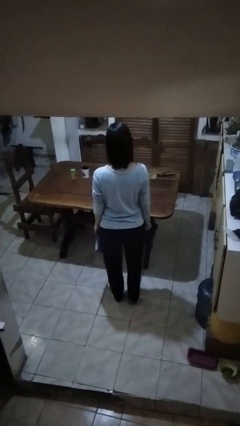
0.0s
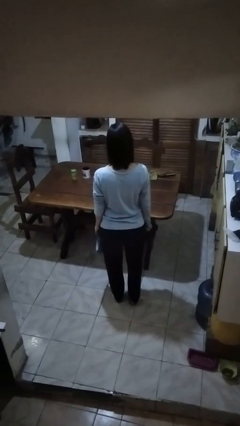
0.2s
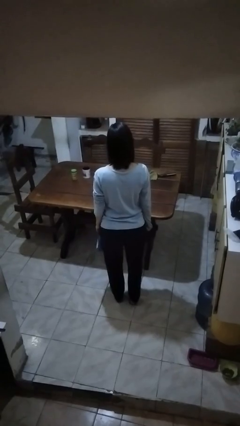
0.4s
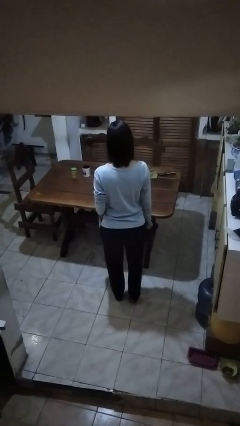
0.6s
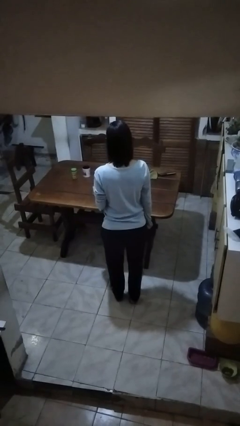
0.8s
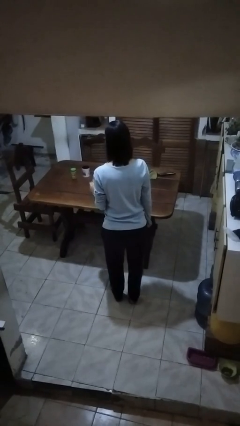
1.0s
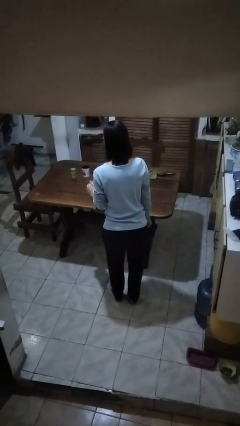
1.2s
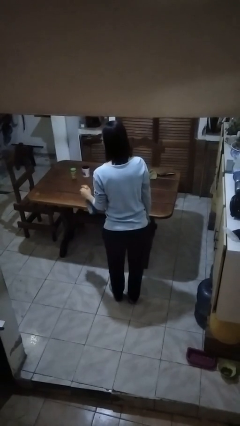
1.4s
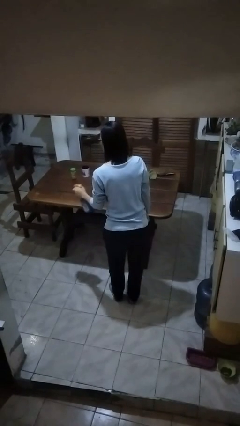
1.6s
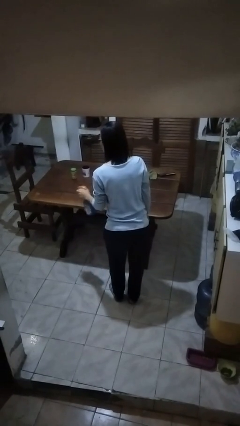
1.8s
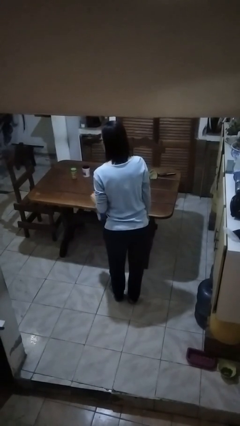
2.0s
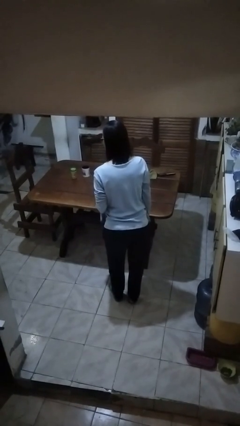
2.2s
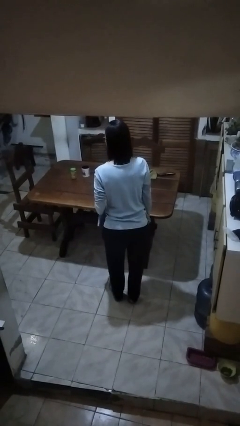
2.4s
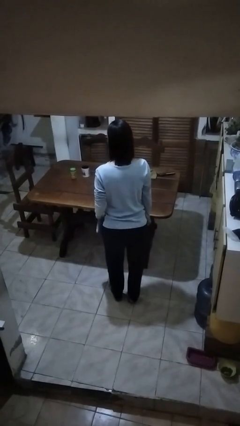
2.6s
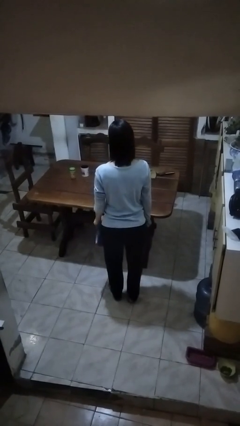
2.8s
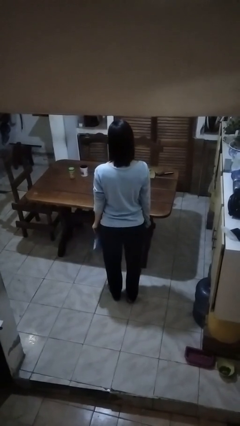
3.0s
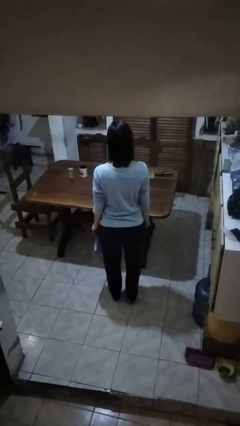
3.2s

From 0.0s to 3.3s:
person sprays from bottle

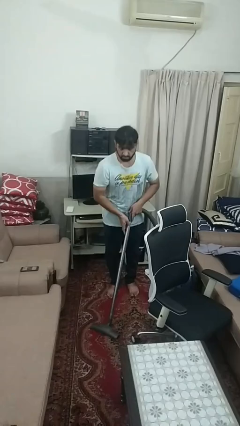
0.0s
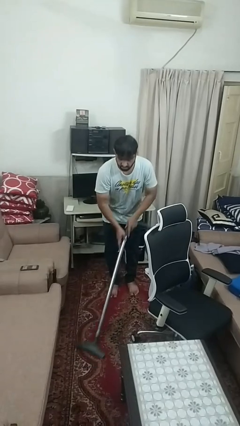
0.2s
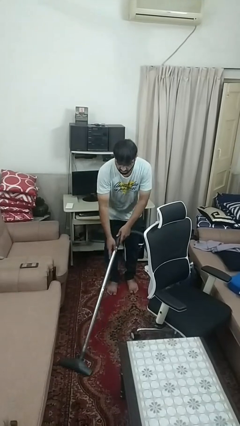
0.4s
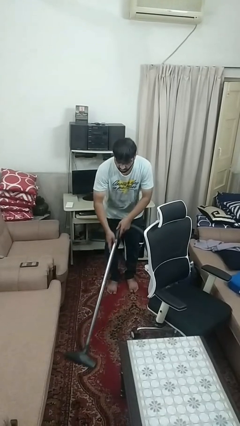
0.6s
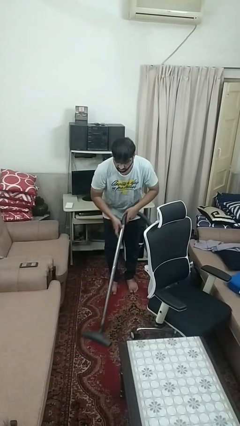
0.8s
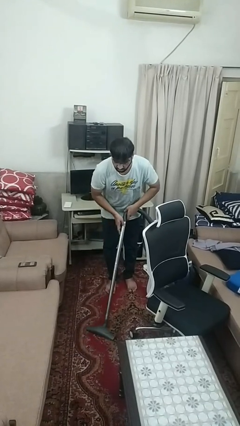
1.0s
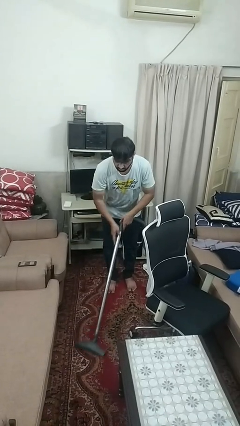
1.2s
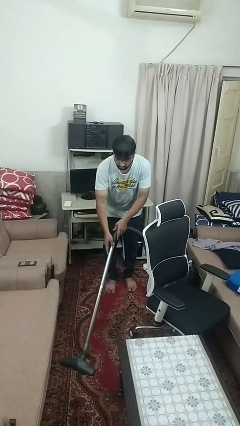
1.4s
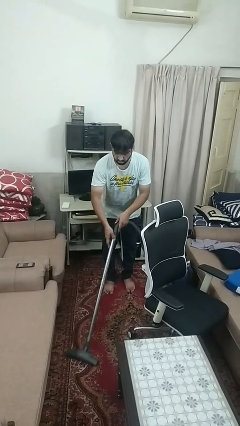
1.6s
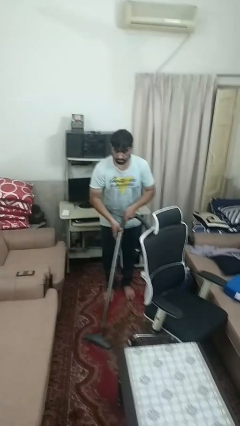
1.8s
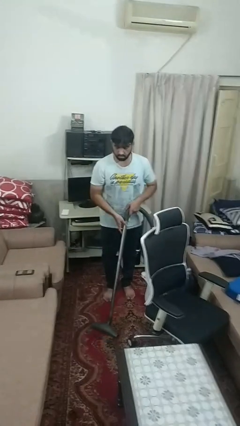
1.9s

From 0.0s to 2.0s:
person vacuums carpet

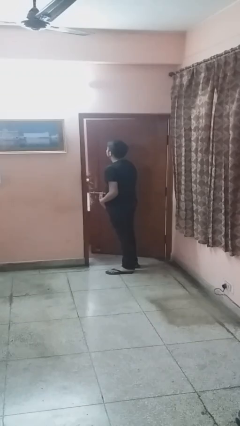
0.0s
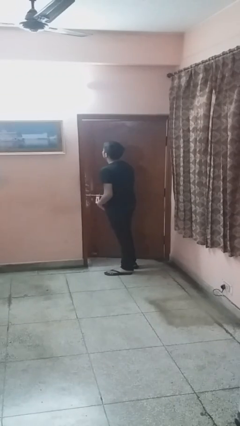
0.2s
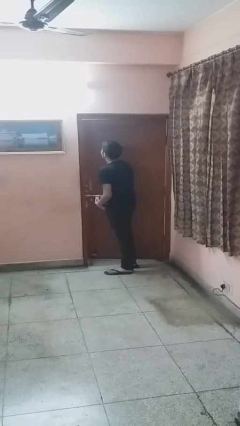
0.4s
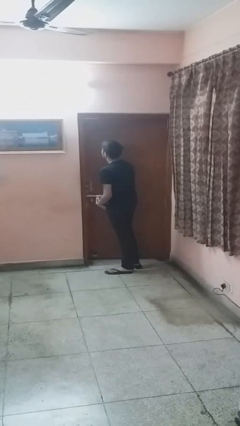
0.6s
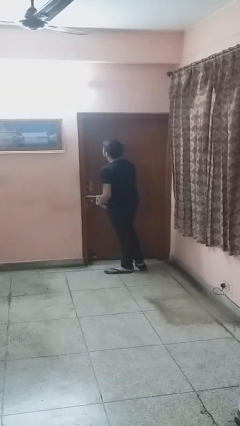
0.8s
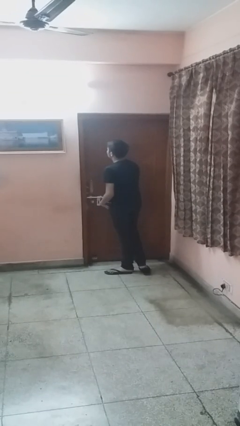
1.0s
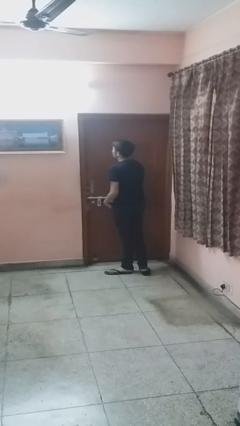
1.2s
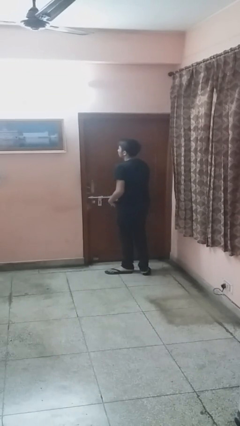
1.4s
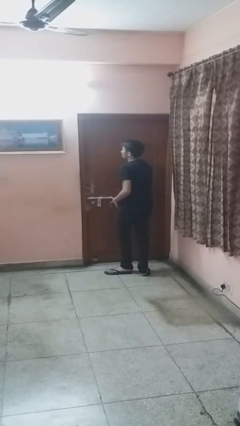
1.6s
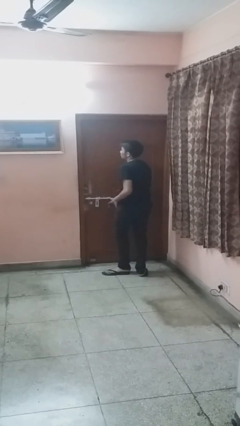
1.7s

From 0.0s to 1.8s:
person closes facility door

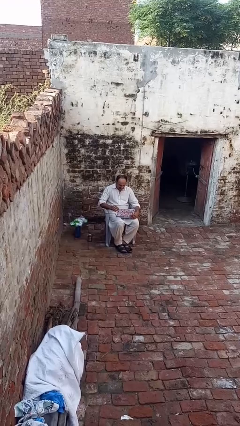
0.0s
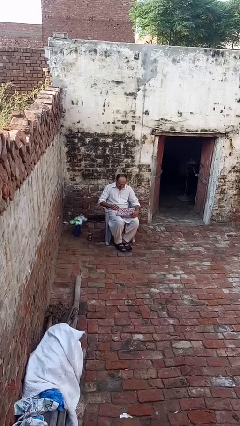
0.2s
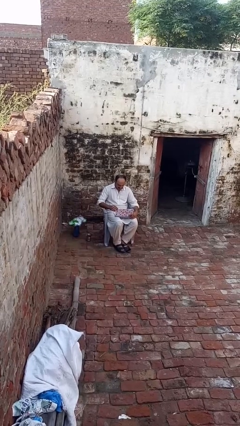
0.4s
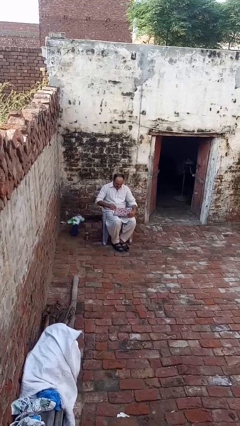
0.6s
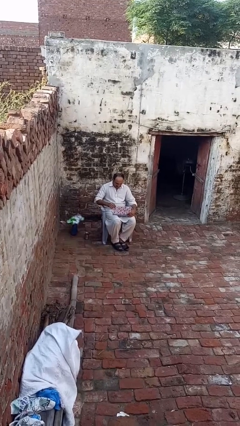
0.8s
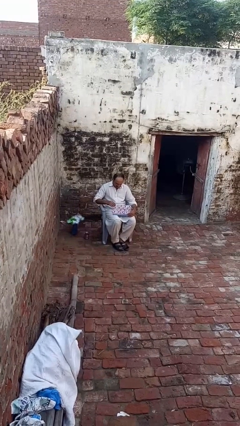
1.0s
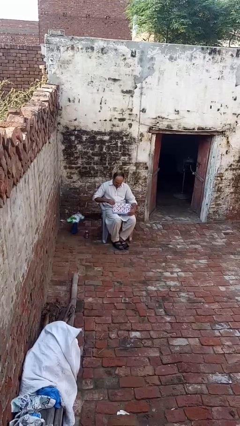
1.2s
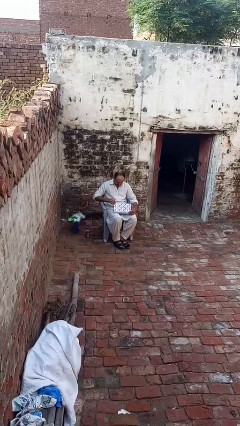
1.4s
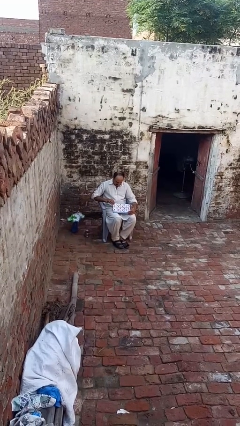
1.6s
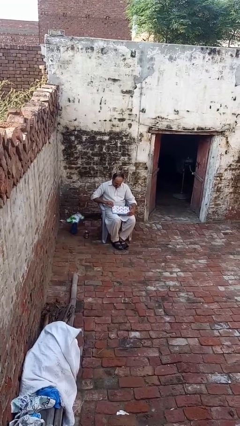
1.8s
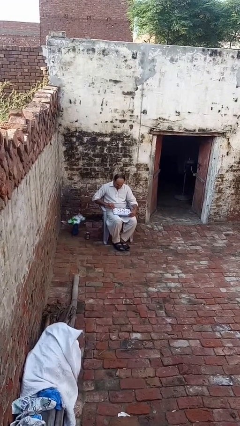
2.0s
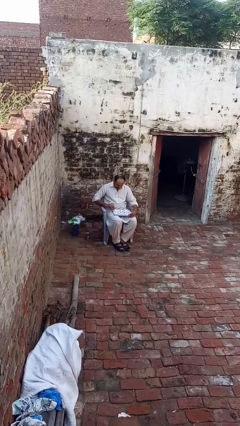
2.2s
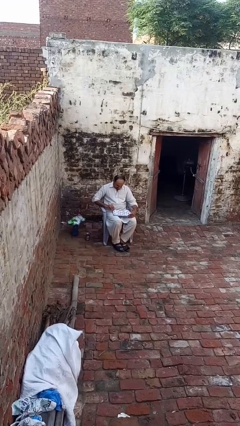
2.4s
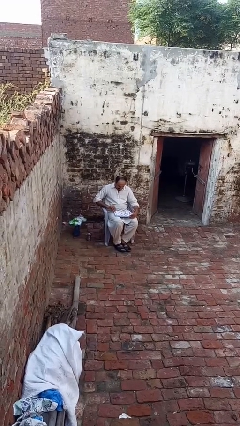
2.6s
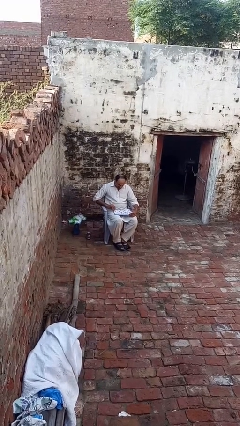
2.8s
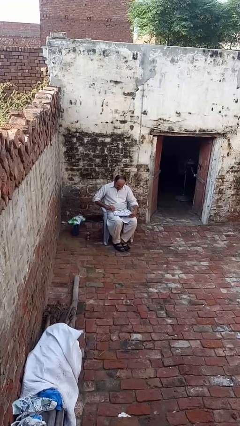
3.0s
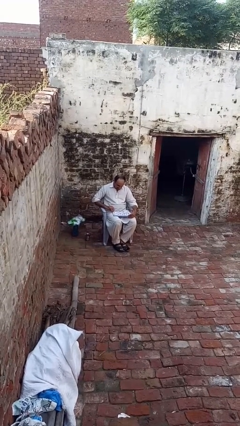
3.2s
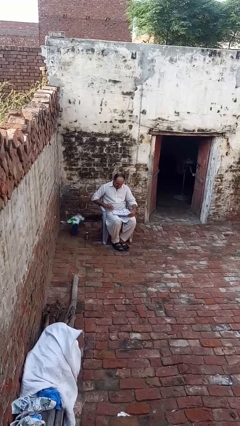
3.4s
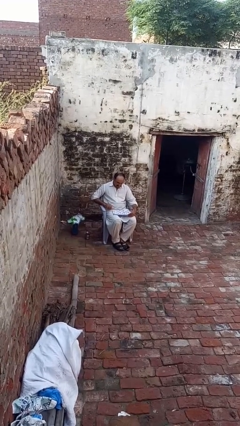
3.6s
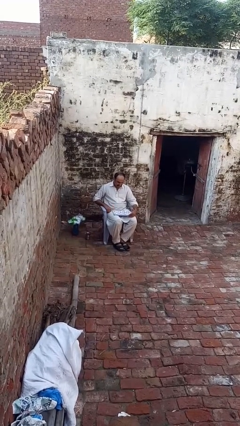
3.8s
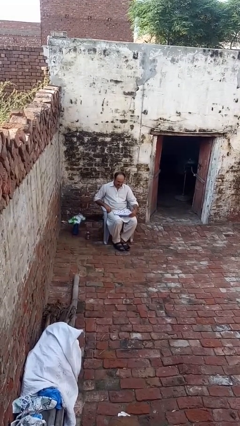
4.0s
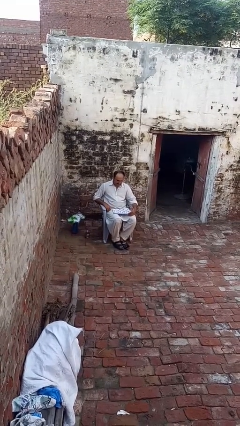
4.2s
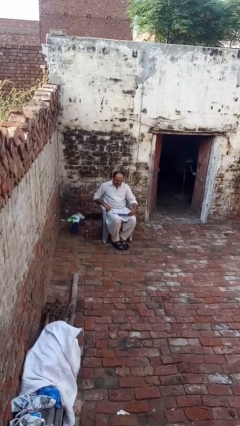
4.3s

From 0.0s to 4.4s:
person closes laptop

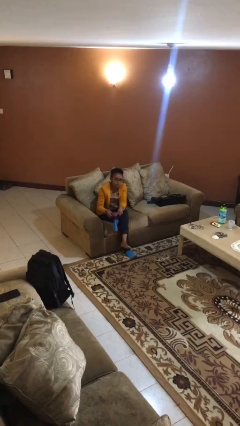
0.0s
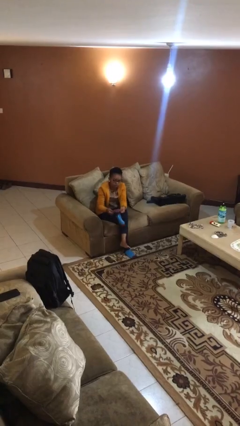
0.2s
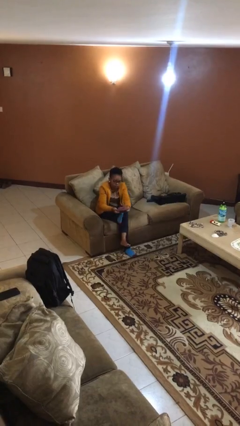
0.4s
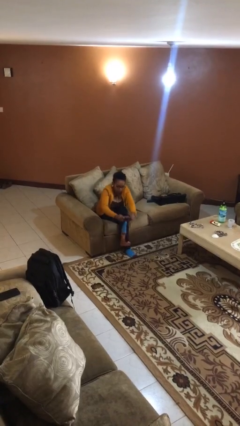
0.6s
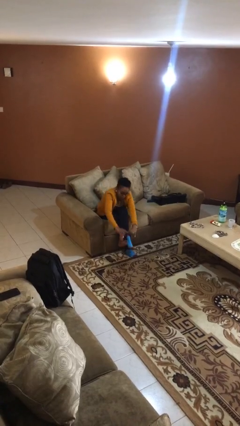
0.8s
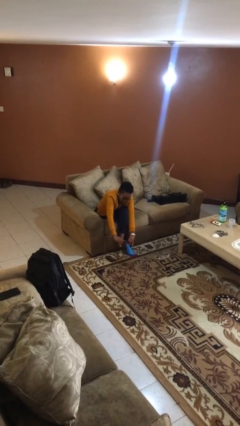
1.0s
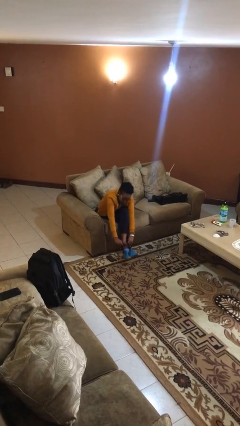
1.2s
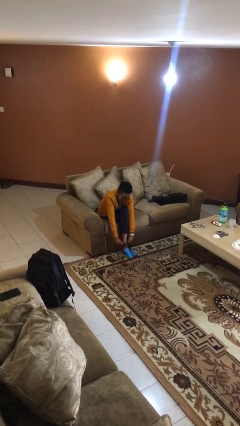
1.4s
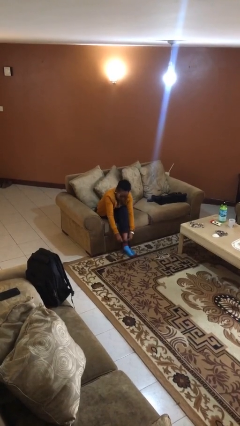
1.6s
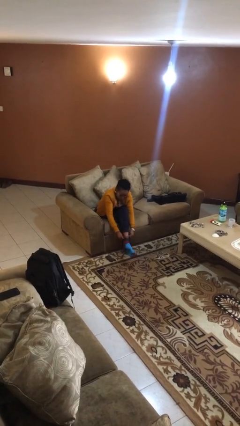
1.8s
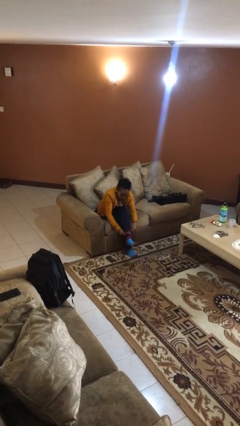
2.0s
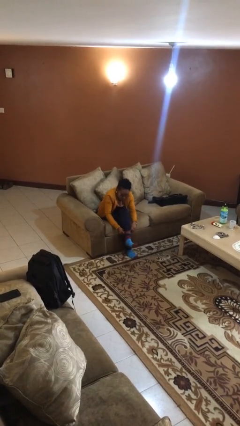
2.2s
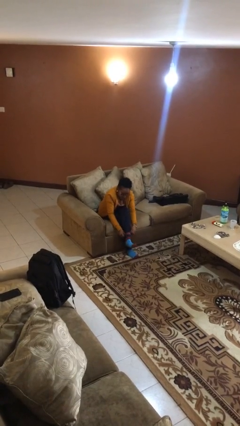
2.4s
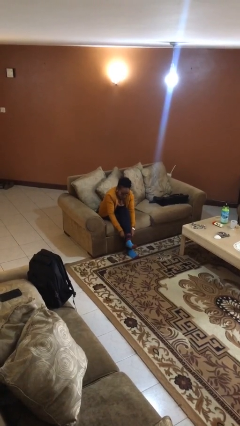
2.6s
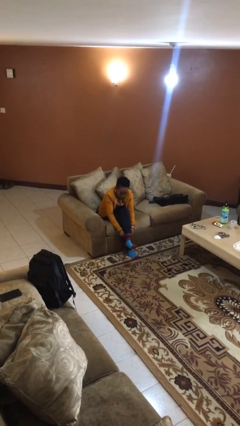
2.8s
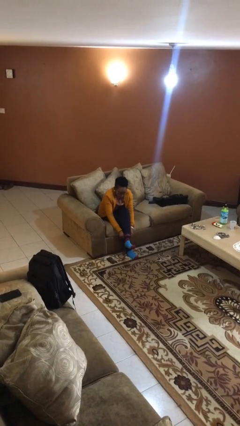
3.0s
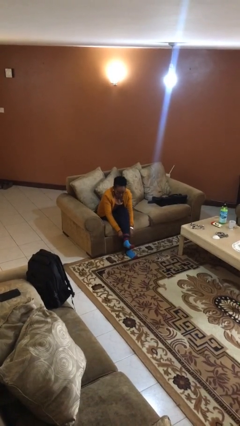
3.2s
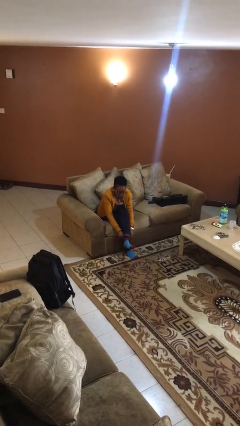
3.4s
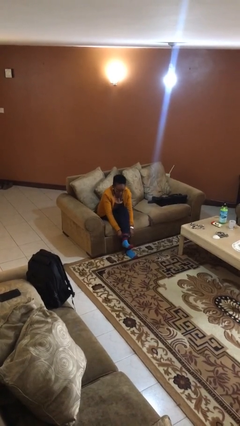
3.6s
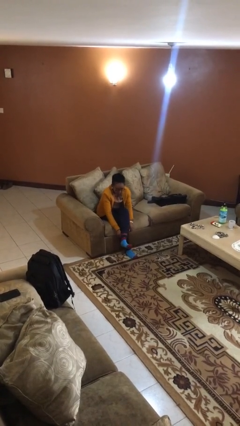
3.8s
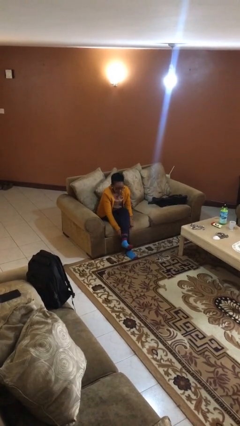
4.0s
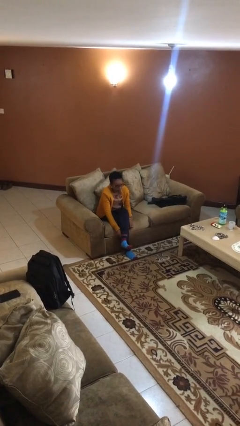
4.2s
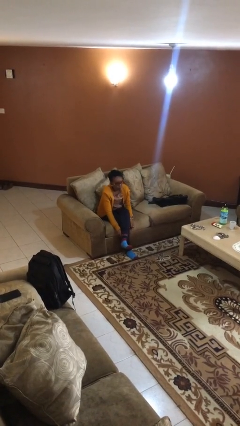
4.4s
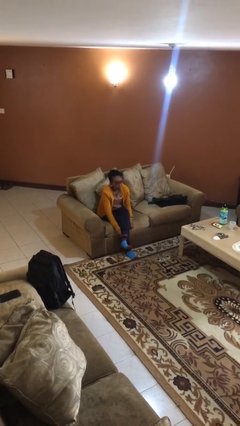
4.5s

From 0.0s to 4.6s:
person puts on socks

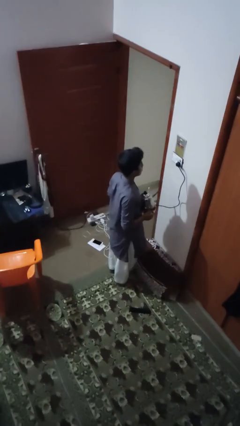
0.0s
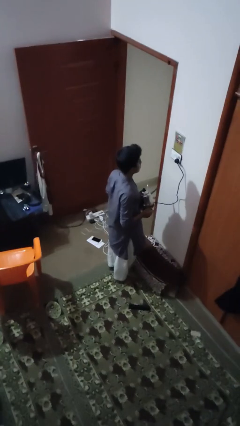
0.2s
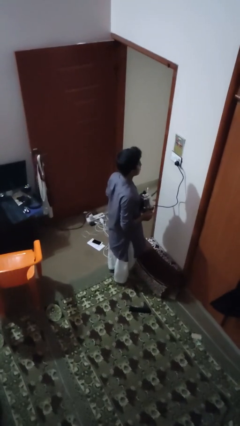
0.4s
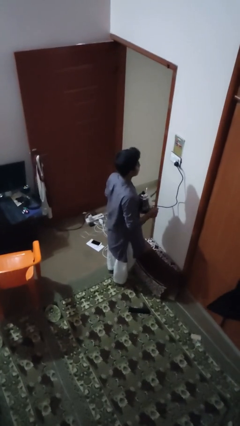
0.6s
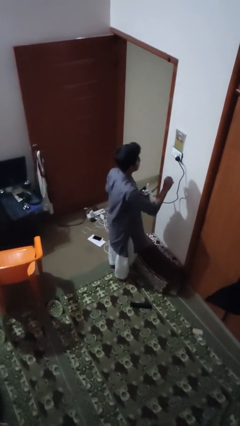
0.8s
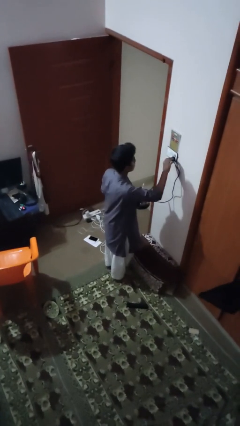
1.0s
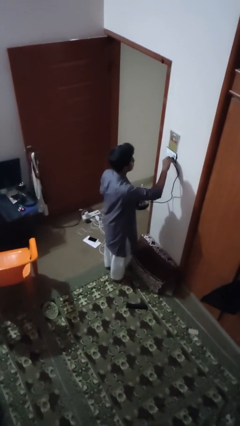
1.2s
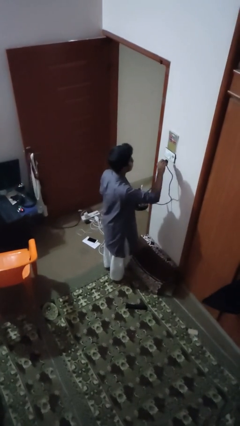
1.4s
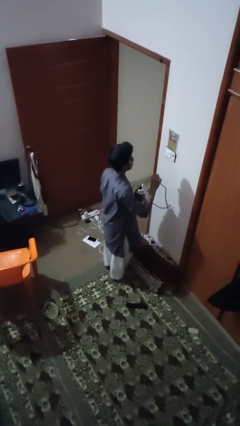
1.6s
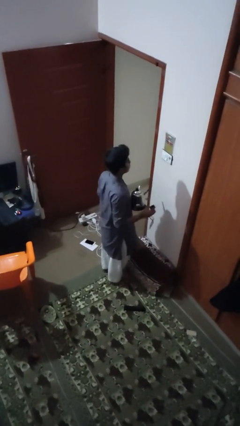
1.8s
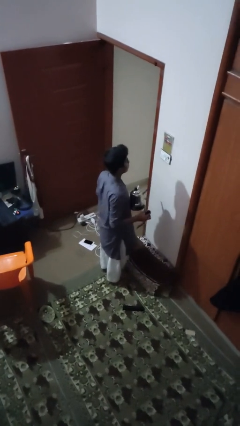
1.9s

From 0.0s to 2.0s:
person unplugs from electrical socket
